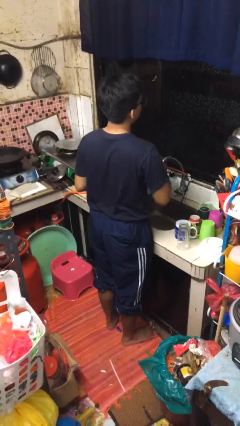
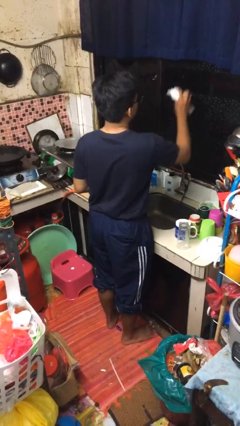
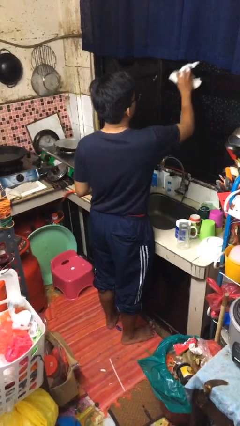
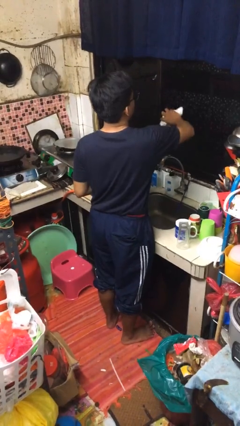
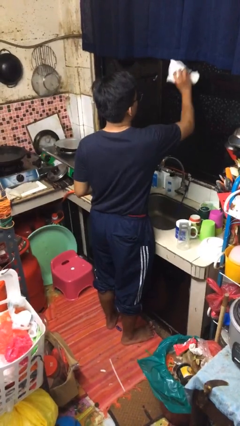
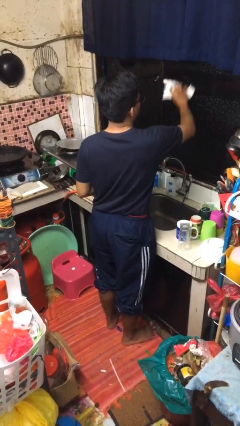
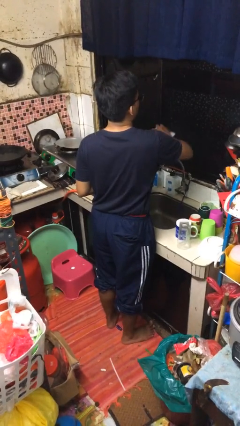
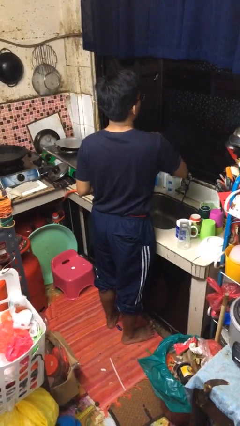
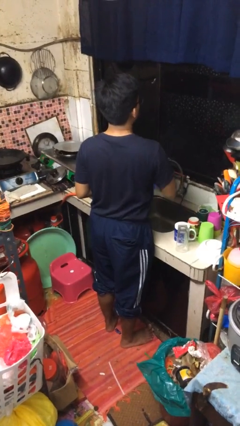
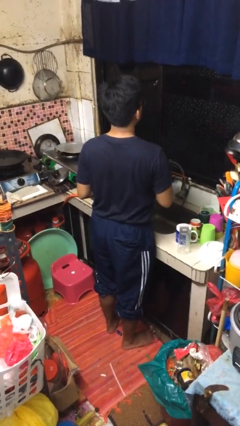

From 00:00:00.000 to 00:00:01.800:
person washes window

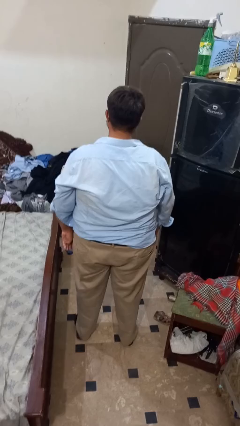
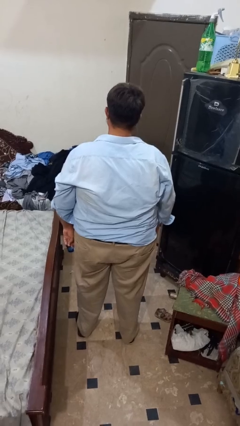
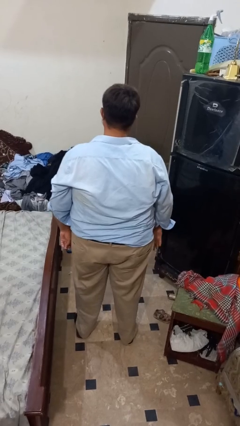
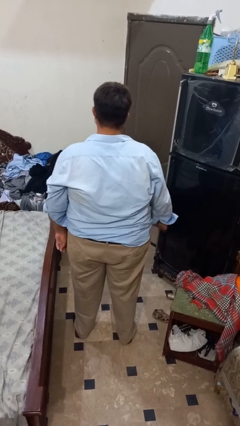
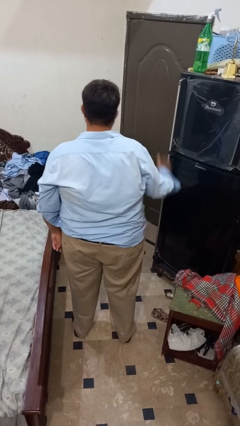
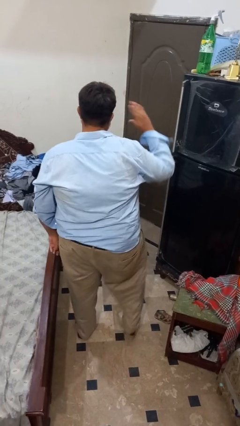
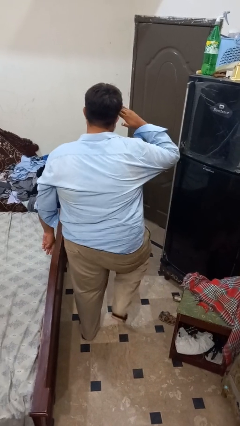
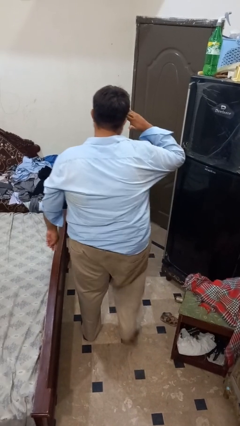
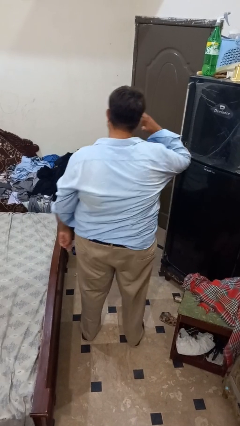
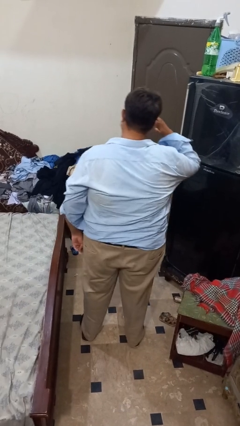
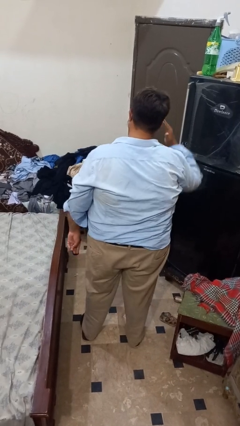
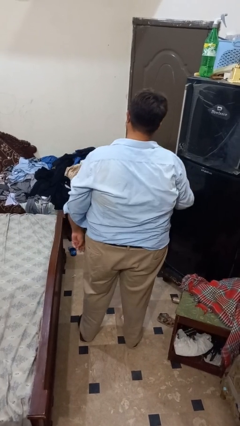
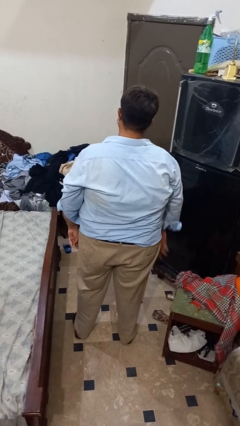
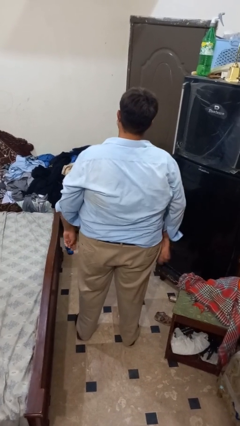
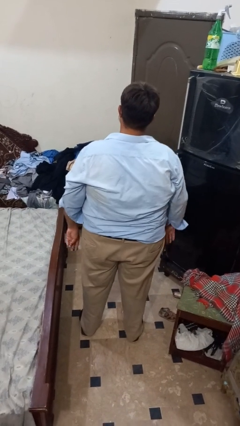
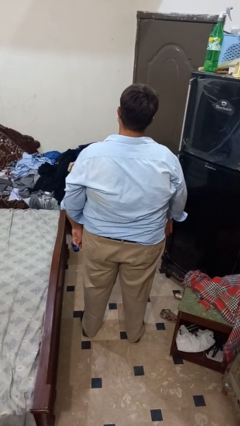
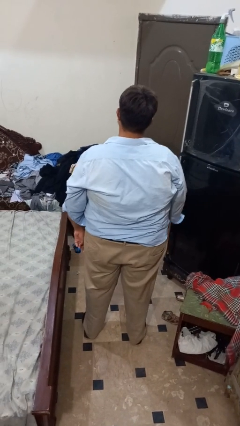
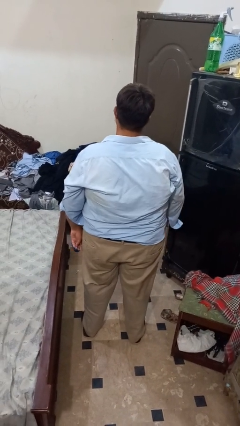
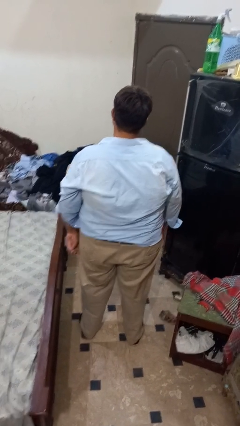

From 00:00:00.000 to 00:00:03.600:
person salutes

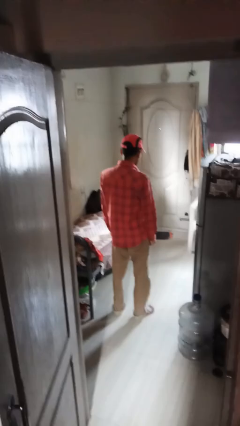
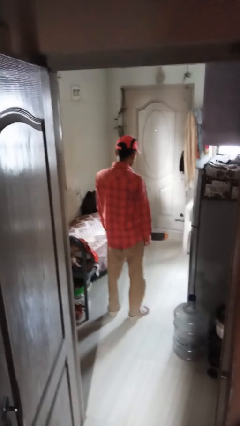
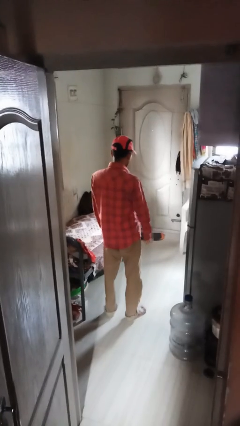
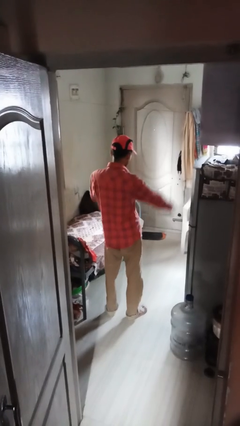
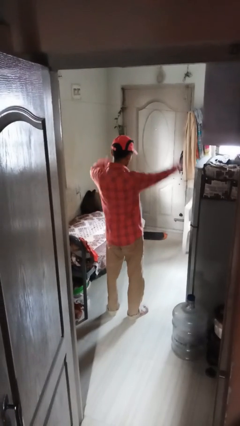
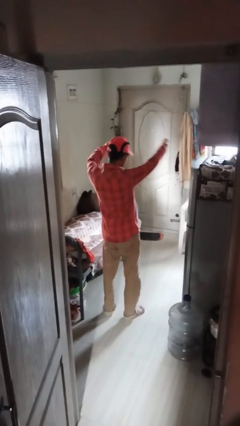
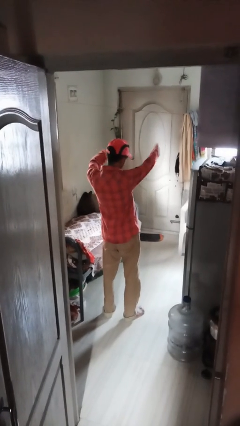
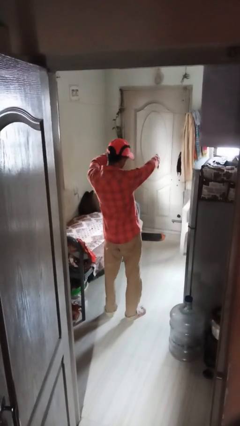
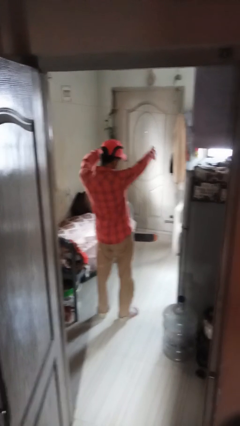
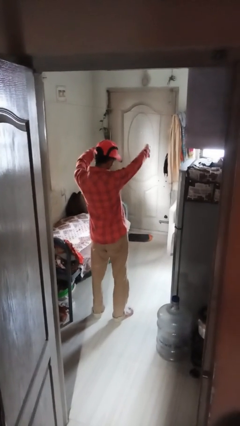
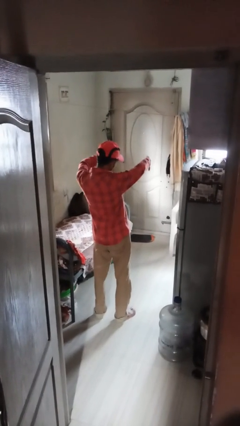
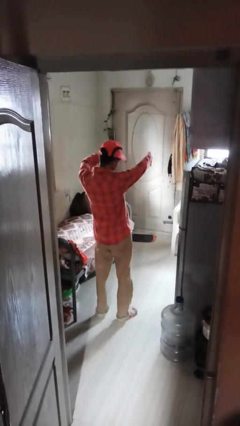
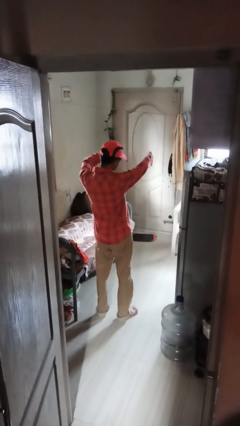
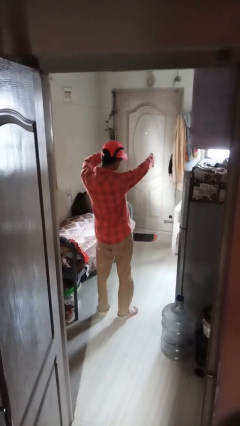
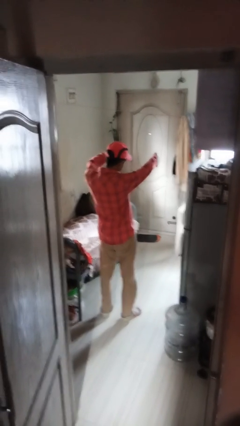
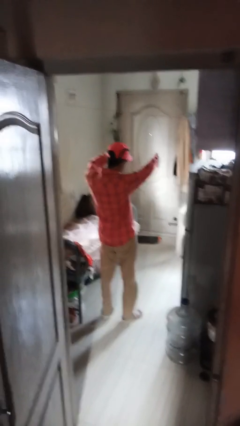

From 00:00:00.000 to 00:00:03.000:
person gestures thumbs down

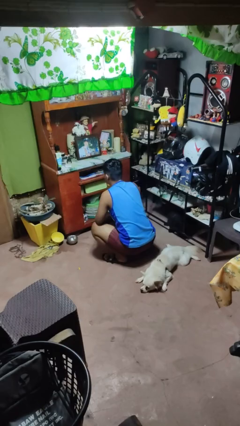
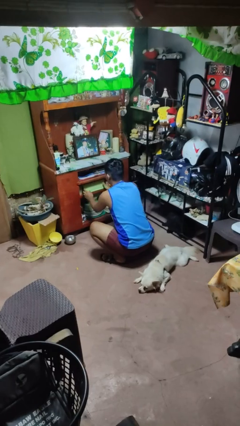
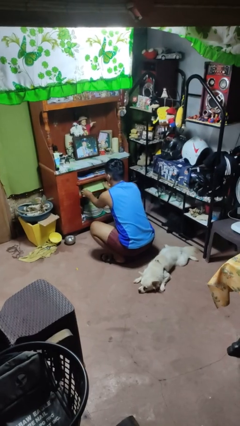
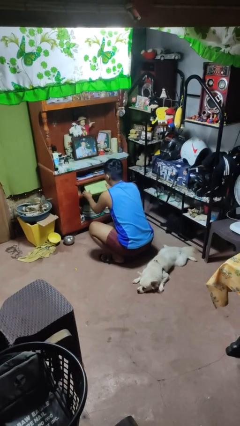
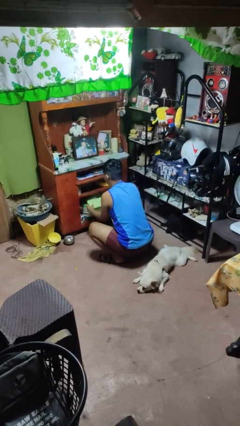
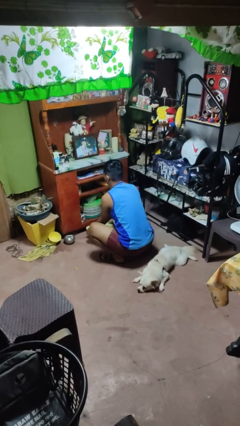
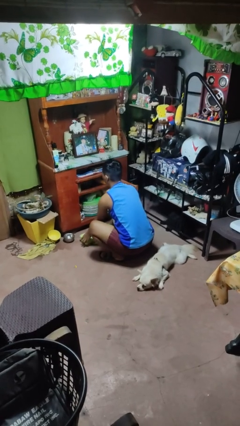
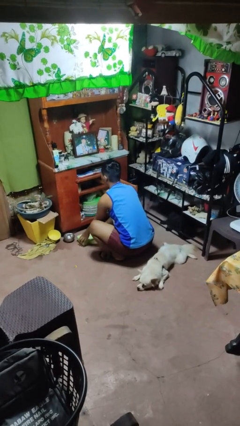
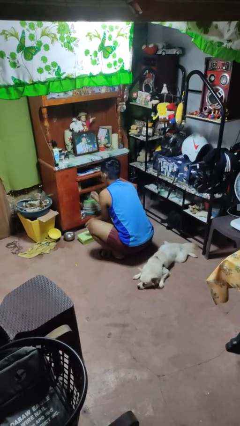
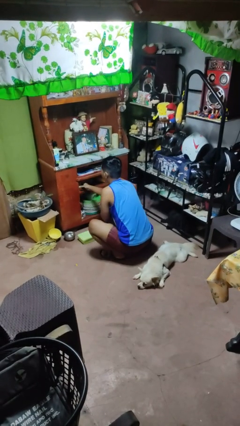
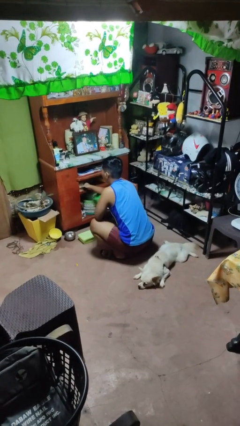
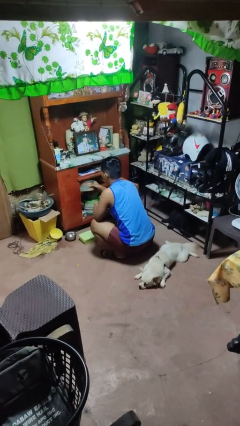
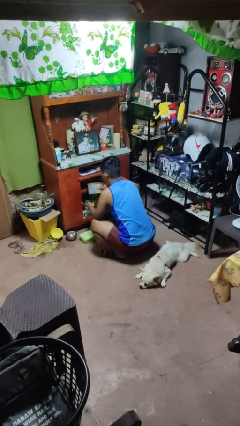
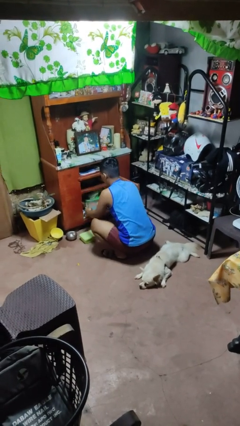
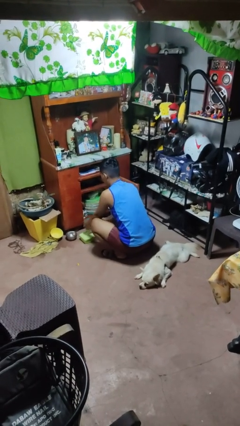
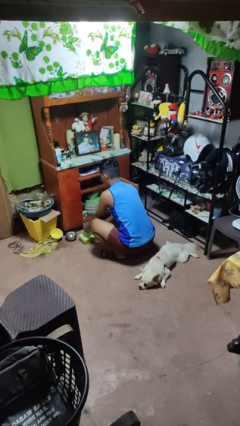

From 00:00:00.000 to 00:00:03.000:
person takes object from cabinet

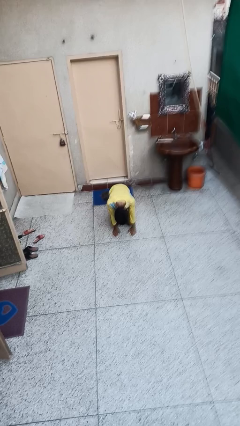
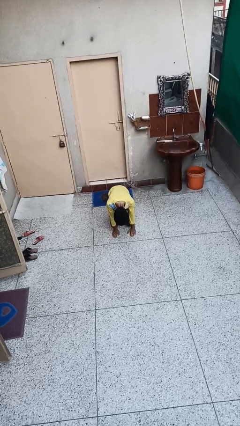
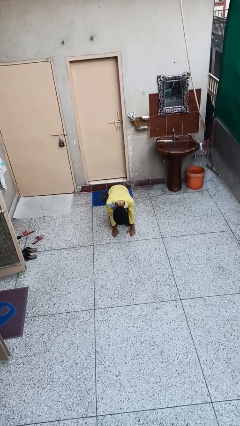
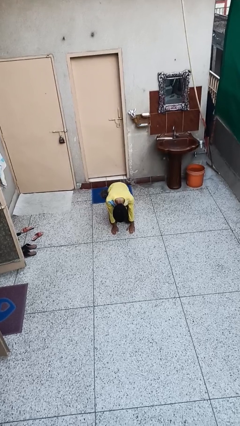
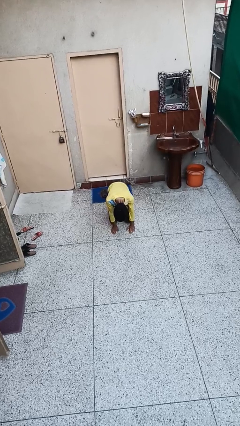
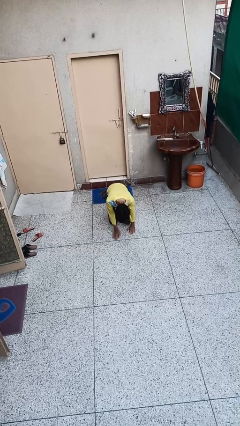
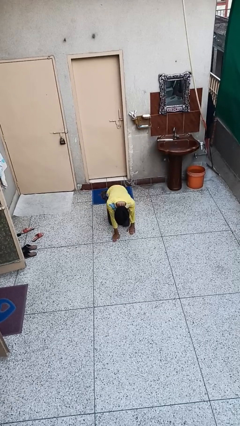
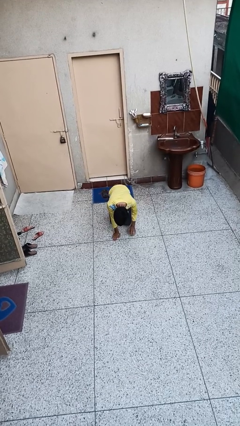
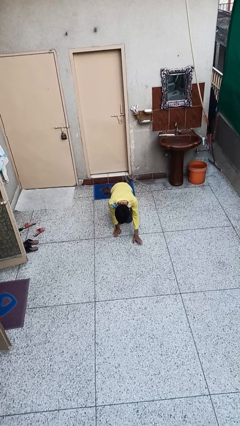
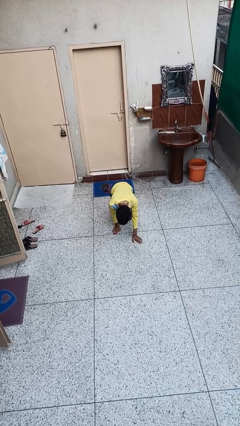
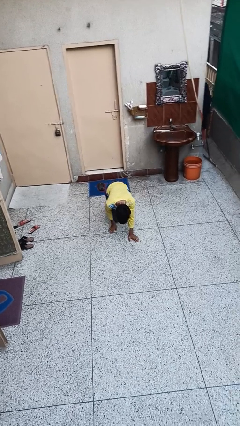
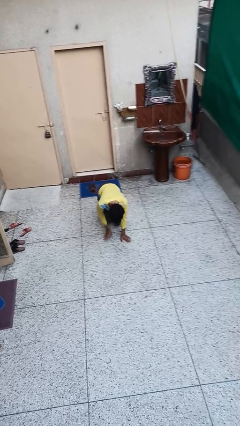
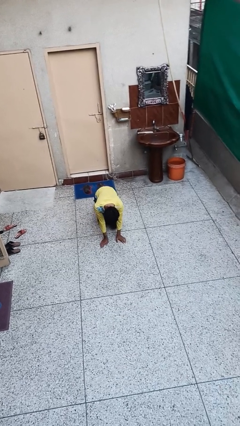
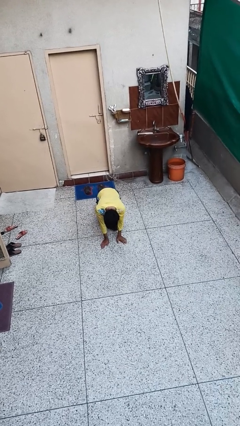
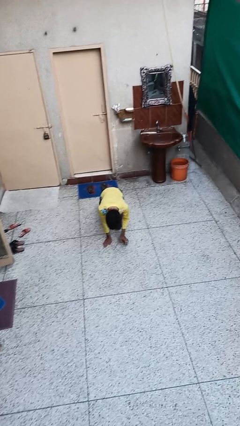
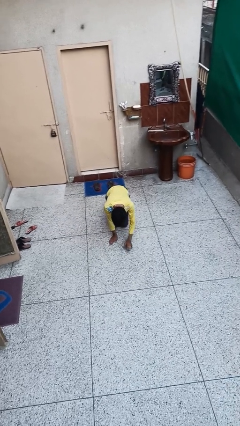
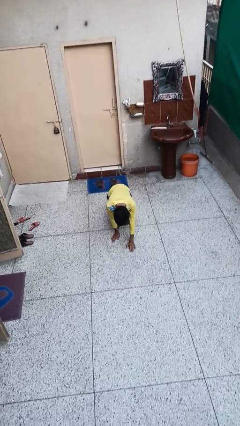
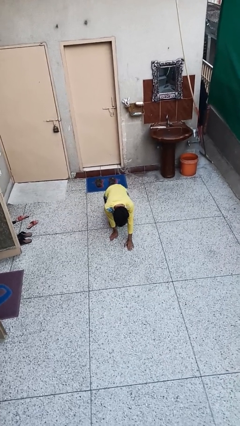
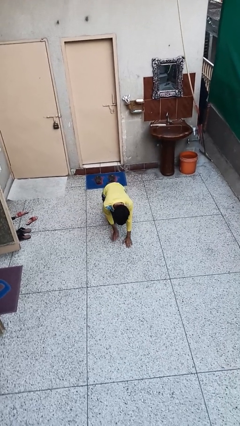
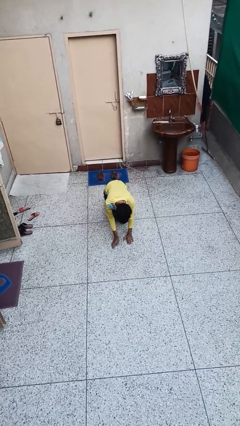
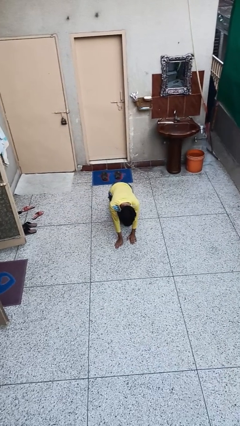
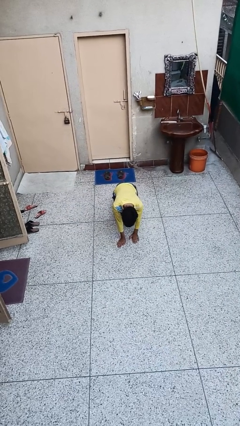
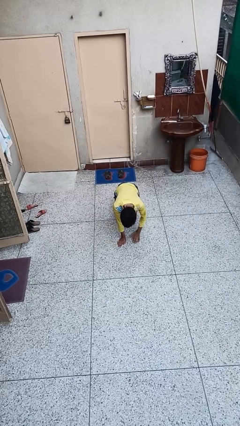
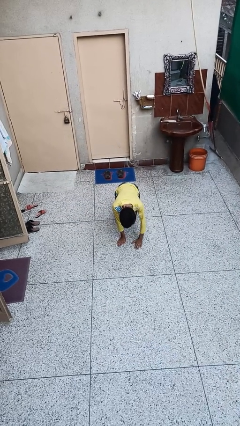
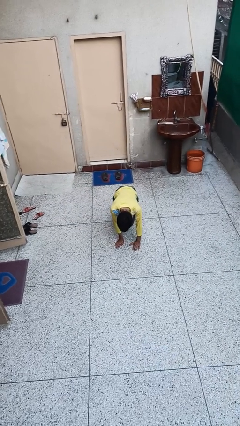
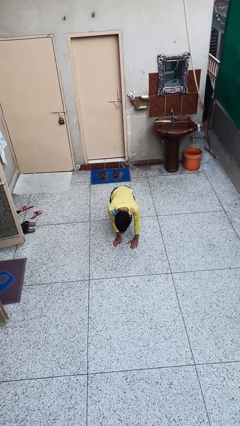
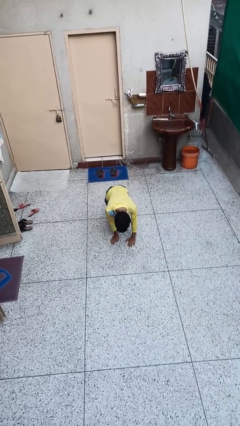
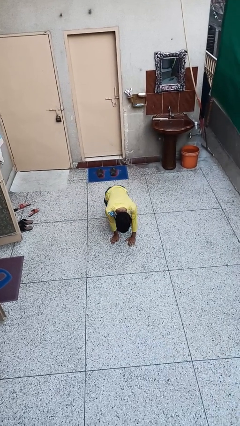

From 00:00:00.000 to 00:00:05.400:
person crawls

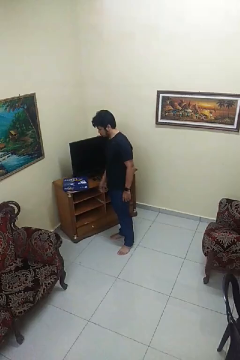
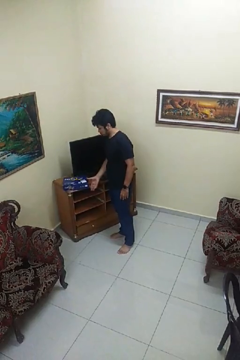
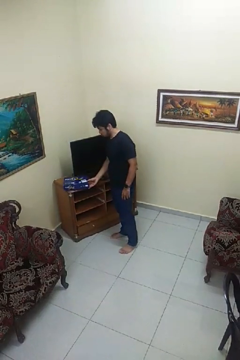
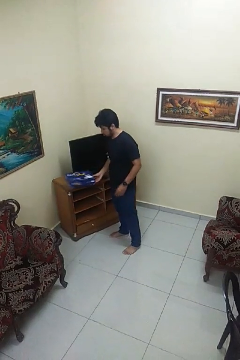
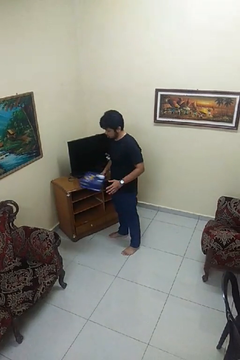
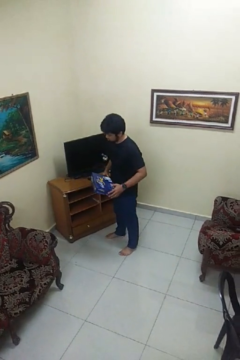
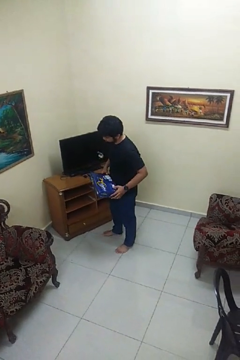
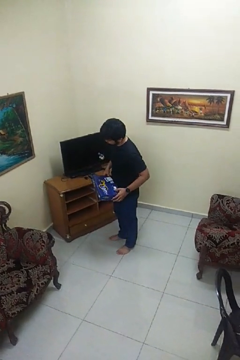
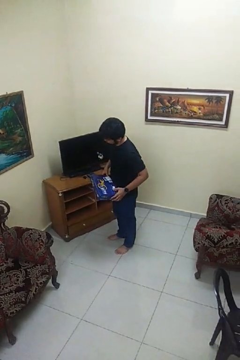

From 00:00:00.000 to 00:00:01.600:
person picks up object from countertop
